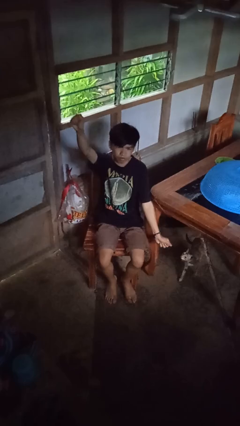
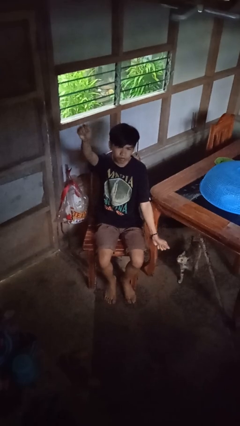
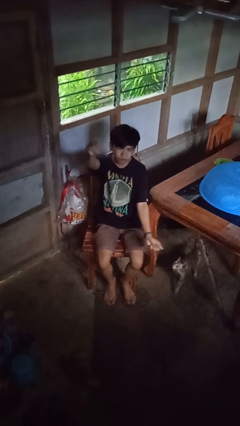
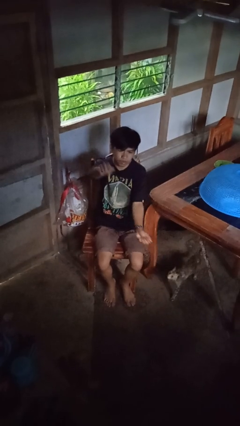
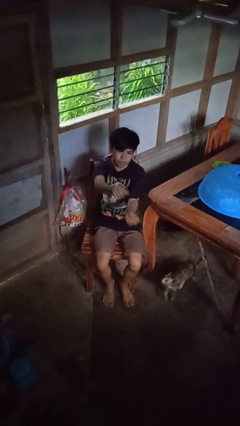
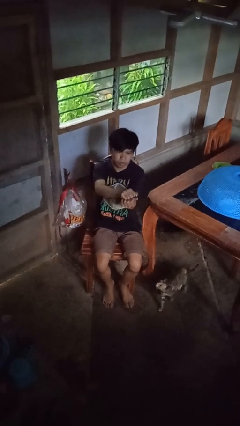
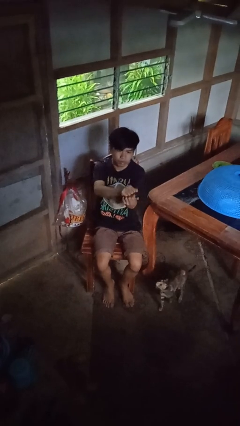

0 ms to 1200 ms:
person gestures zoom in

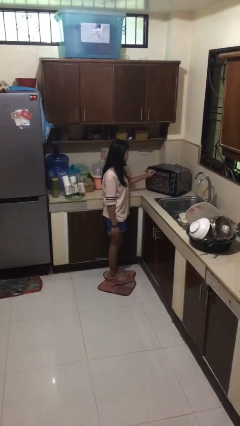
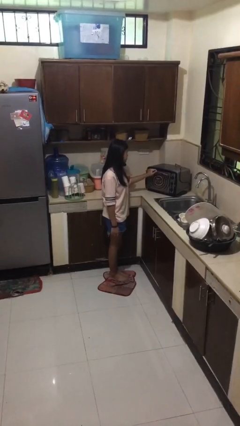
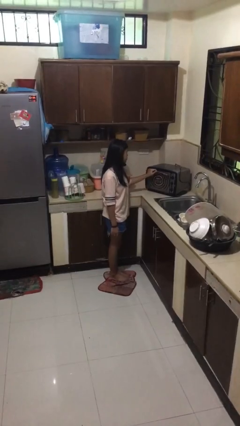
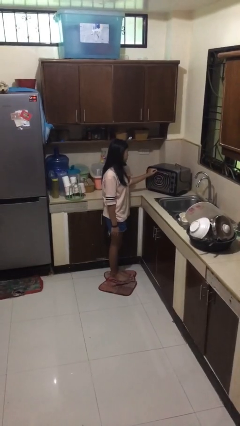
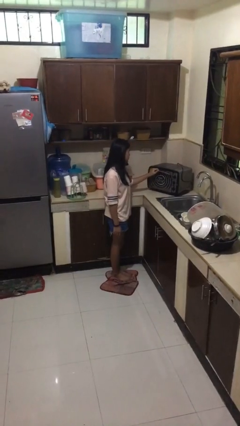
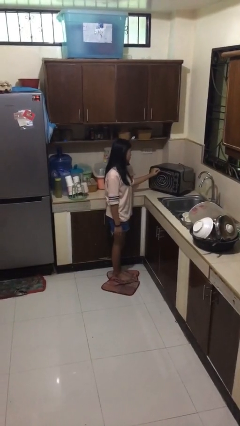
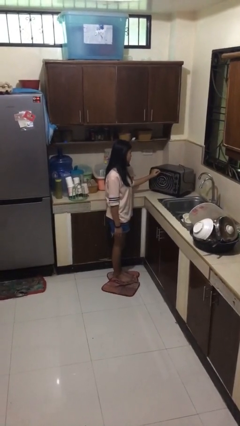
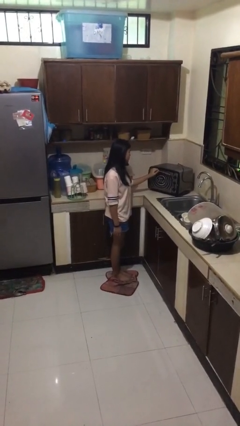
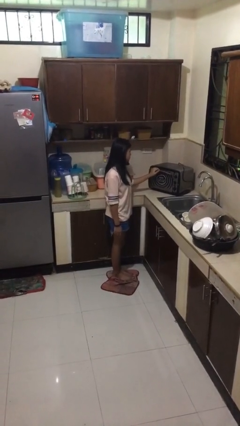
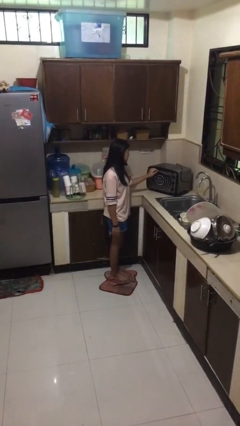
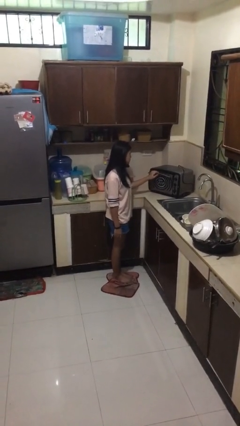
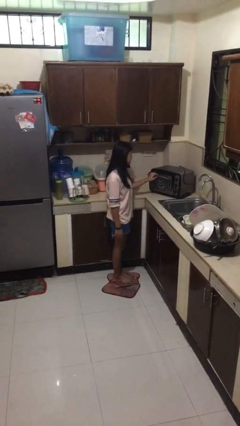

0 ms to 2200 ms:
person closes microwave

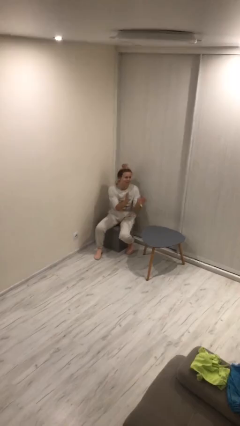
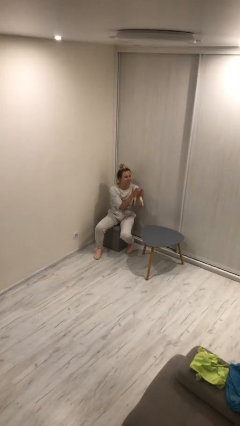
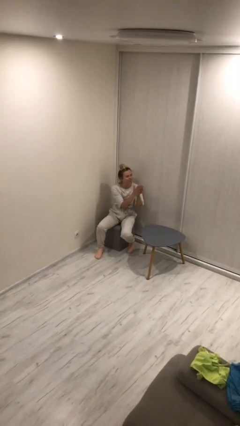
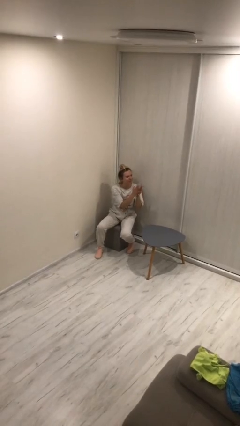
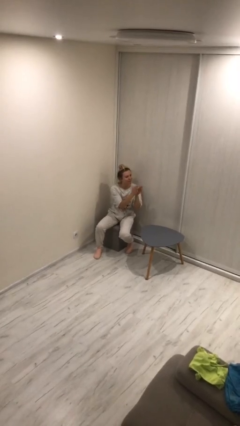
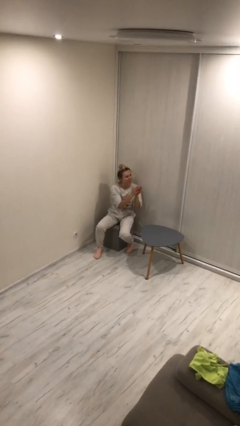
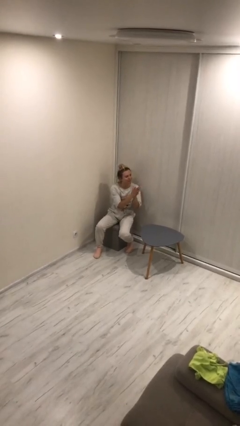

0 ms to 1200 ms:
person claps hands

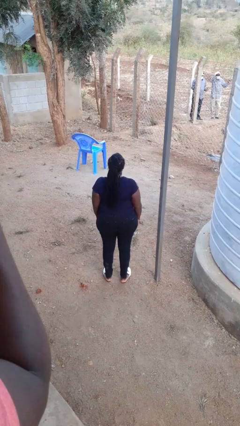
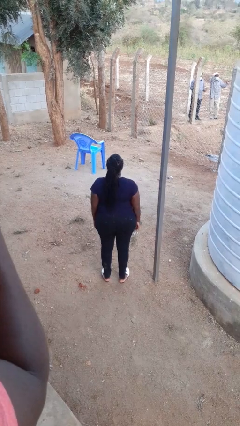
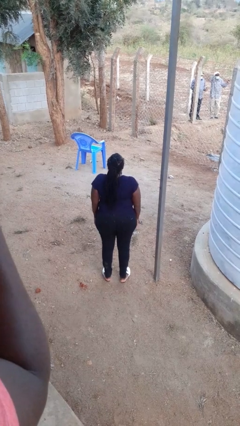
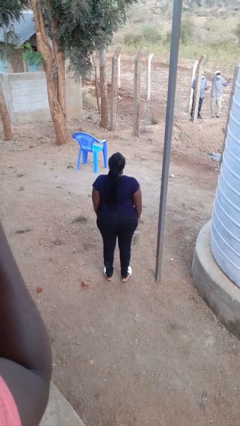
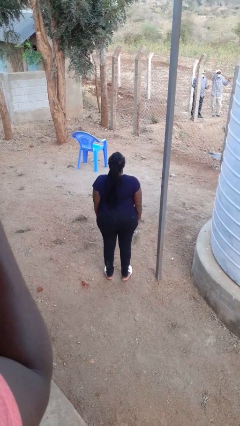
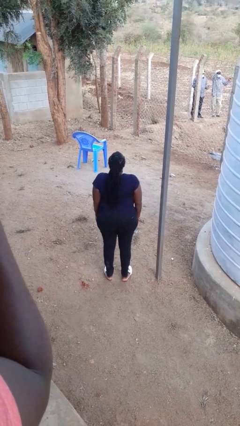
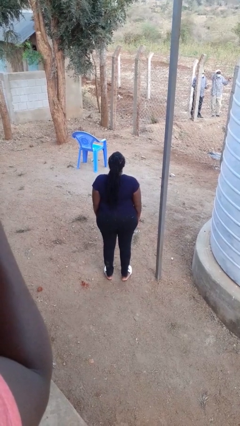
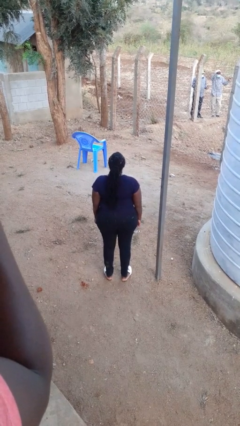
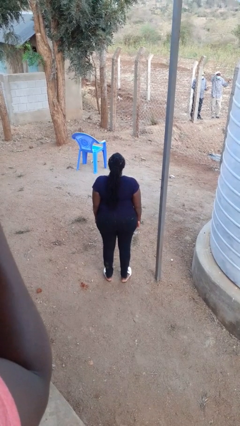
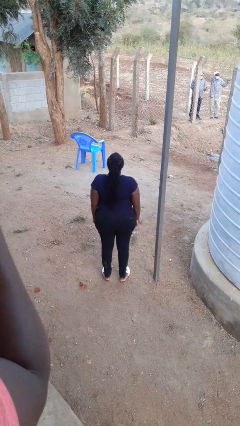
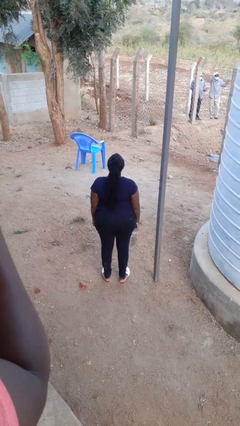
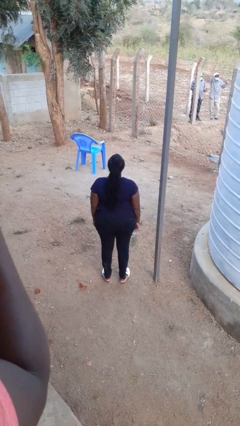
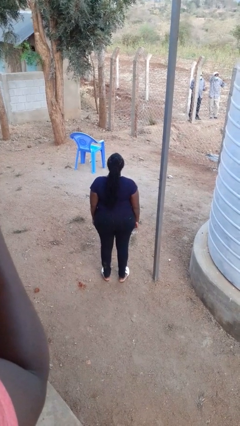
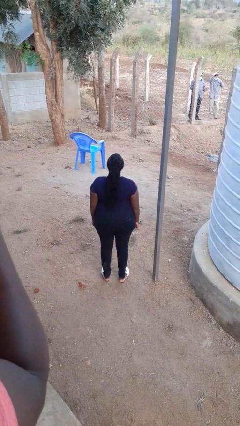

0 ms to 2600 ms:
person shrugs

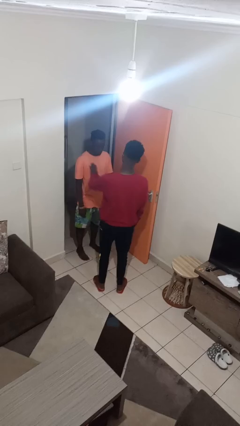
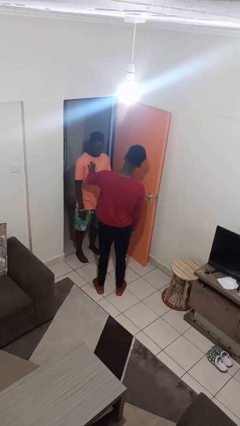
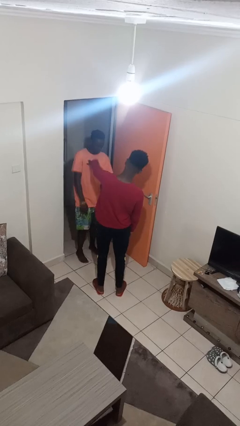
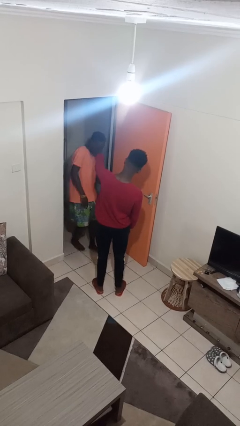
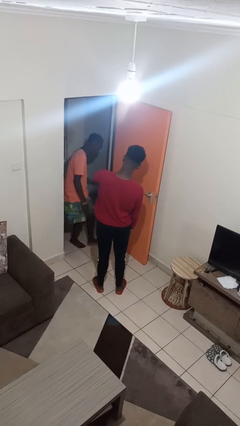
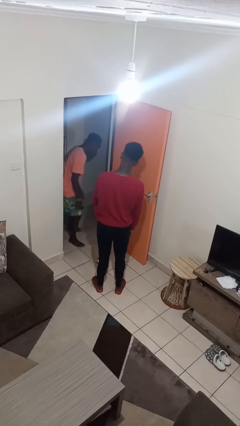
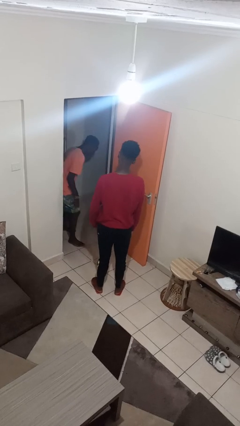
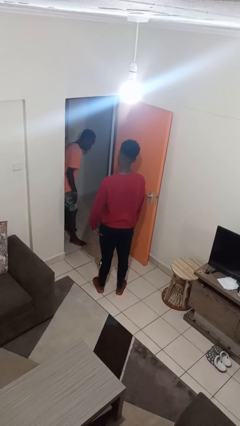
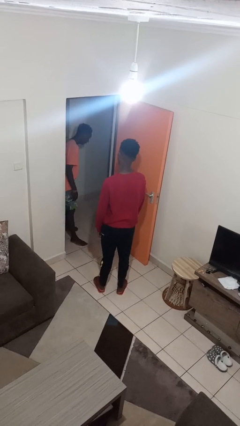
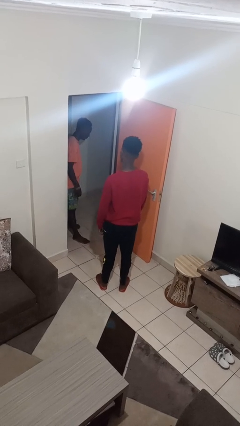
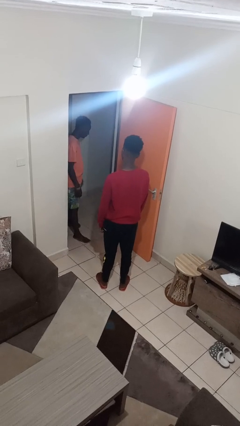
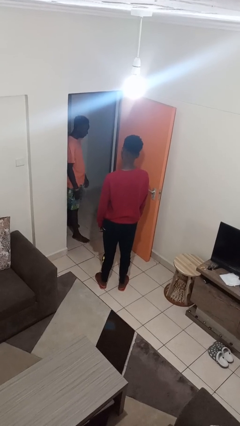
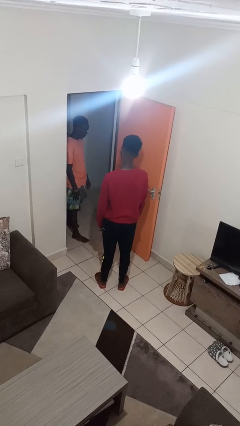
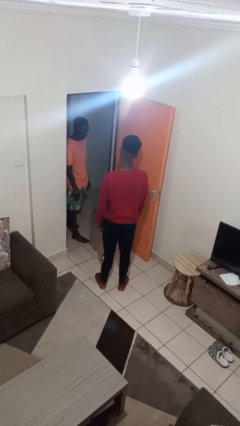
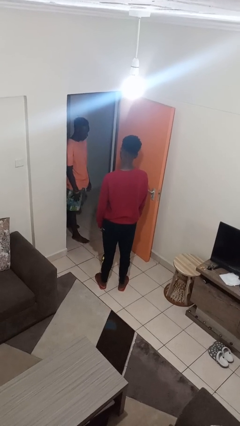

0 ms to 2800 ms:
person shoves person

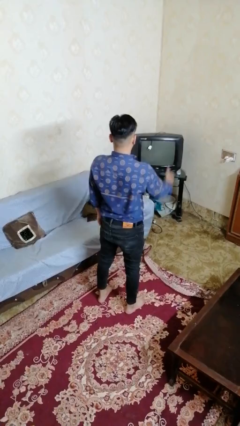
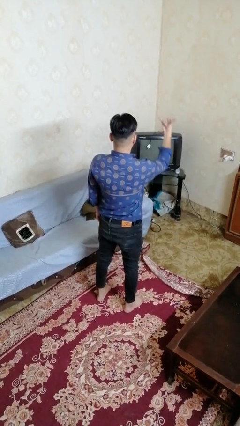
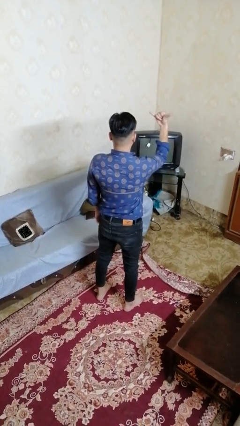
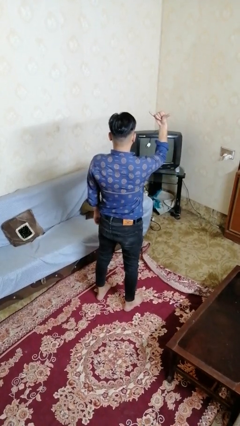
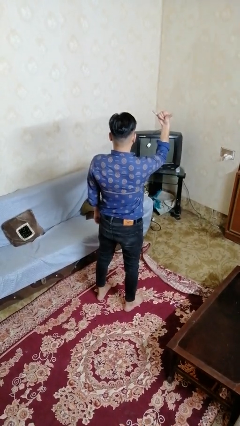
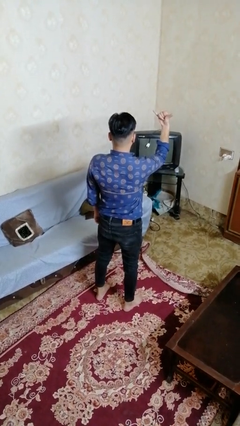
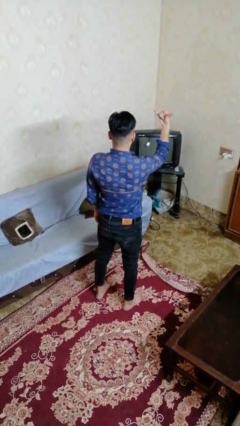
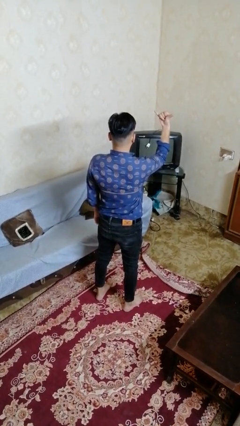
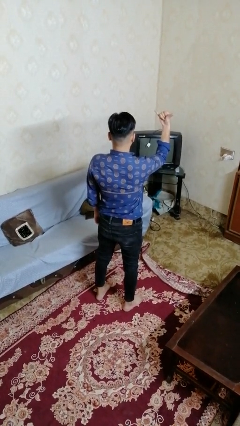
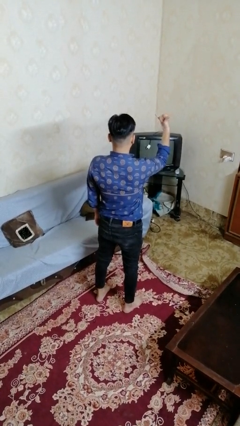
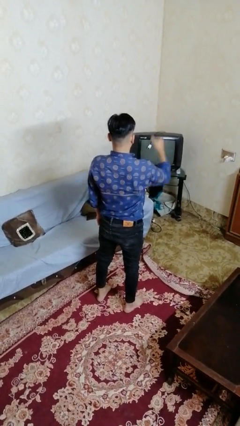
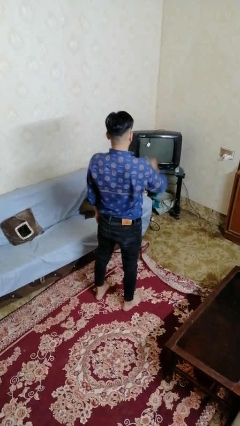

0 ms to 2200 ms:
person gestures hang loose

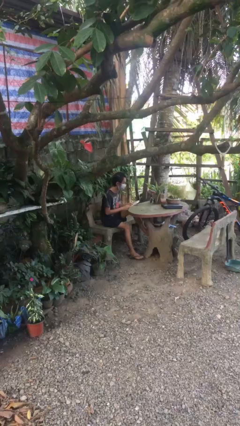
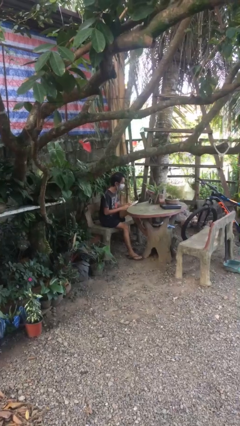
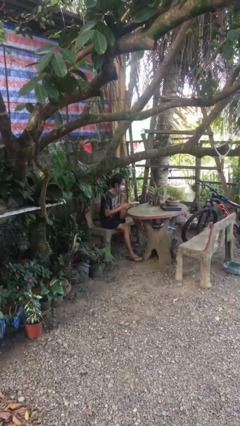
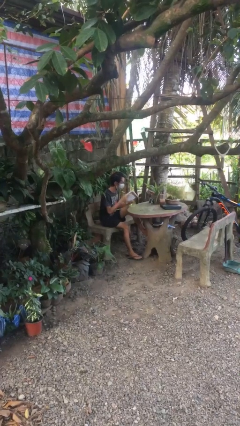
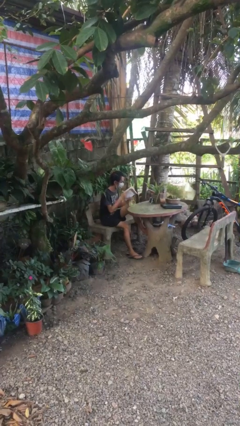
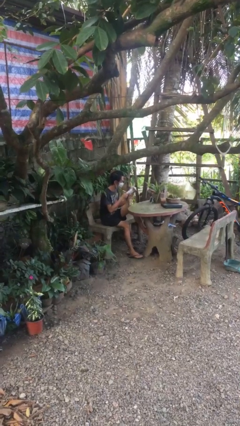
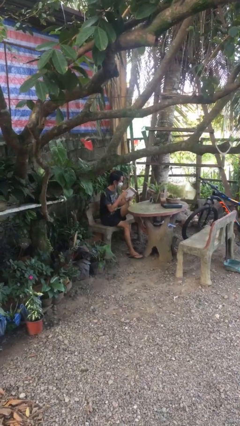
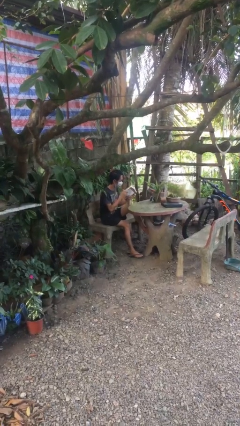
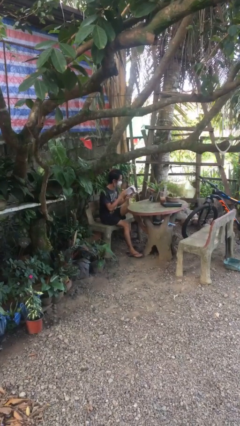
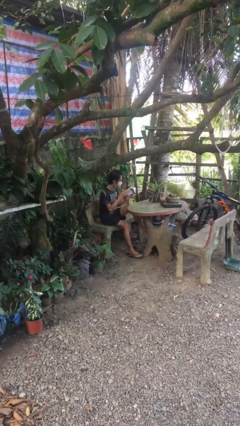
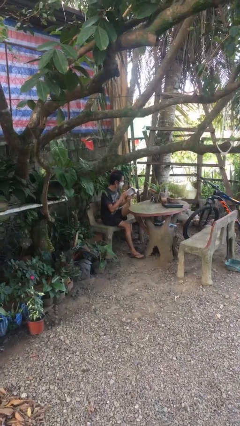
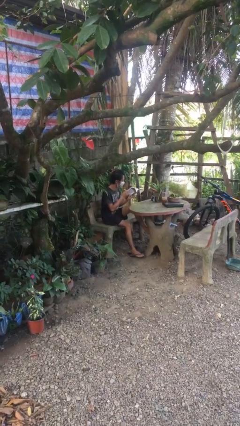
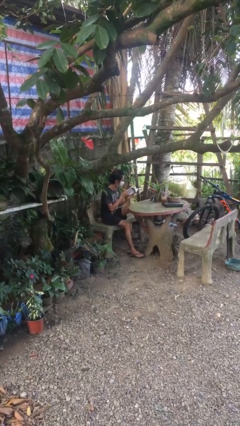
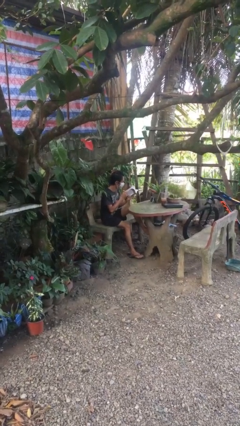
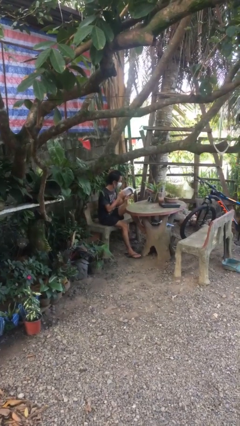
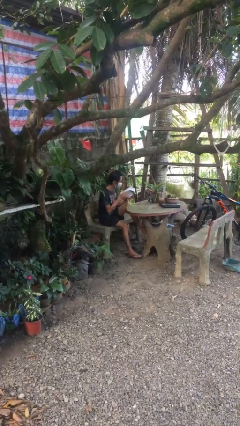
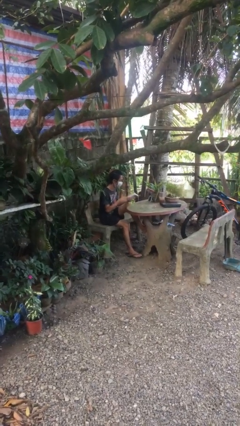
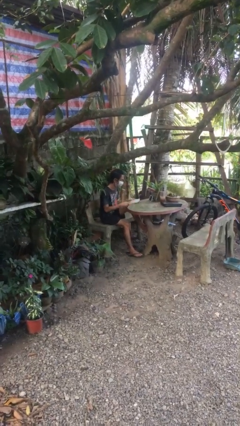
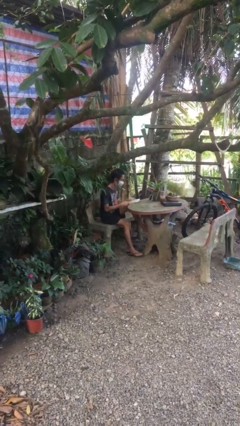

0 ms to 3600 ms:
person reads document

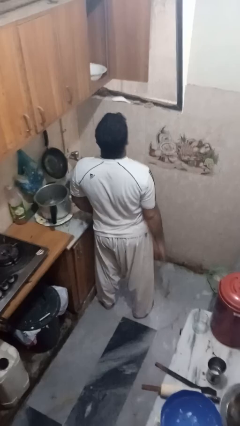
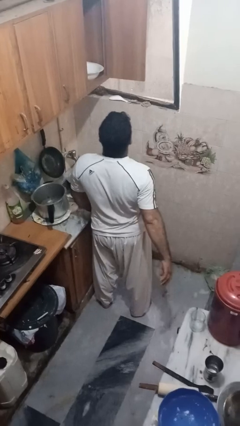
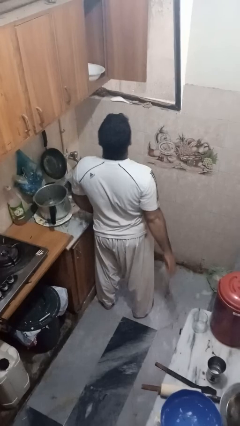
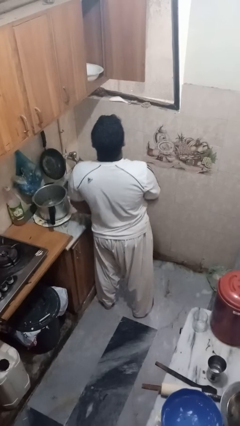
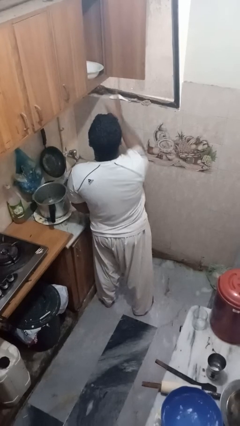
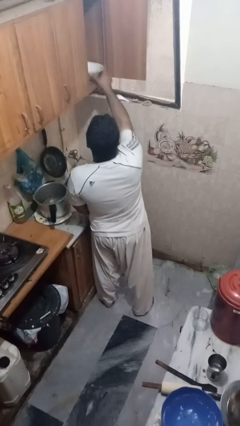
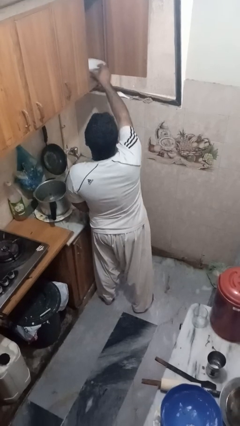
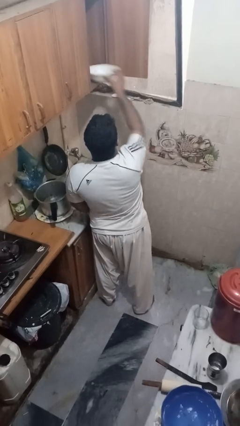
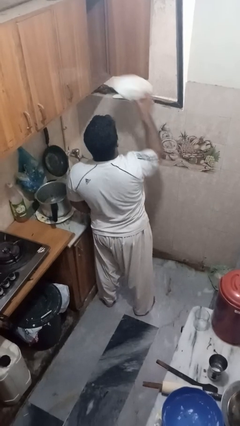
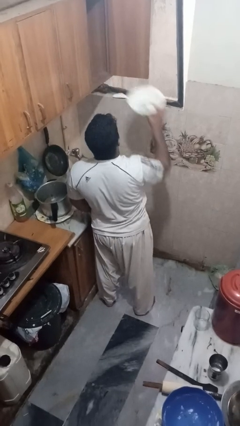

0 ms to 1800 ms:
person takes object from cabinet
